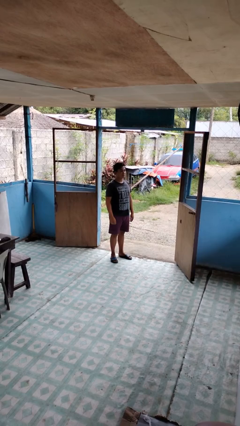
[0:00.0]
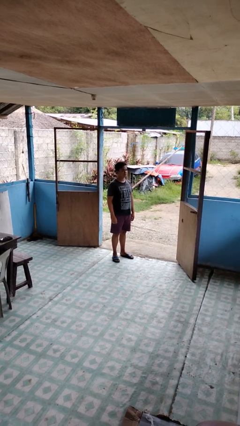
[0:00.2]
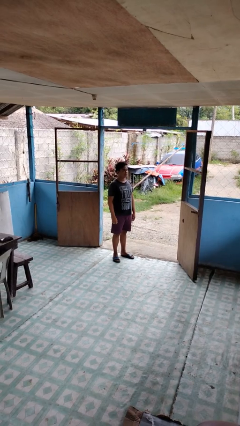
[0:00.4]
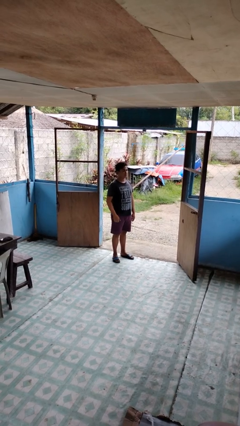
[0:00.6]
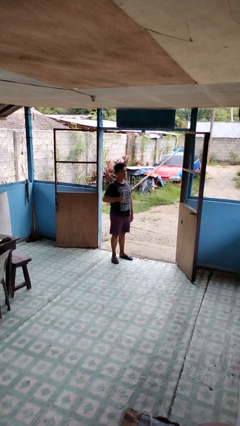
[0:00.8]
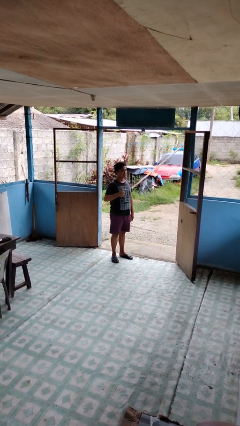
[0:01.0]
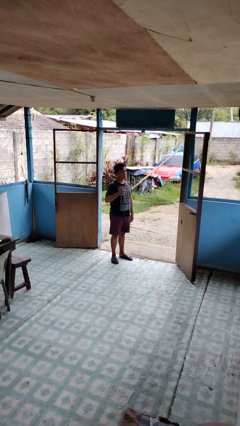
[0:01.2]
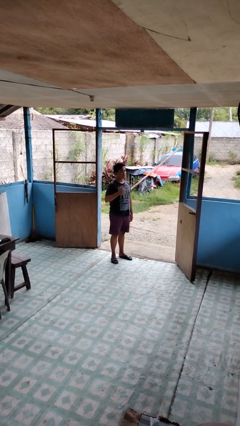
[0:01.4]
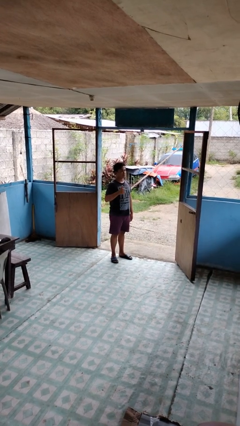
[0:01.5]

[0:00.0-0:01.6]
person gestures thumbs up

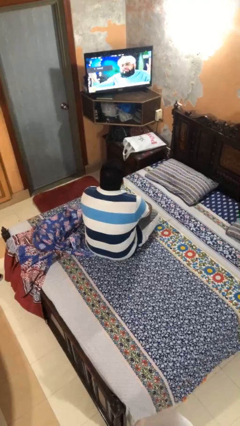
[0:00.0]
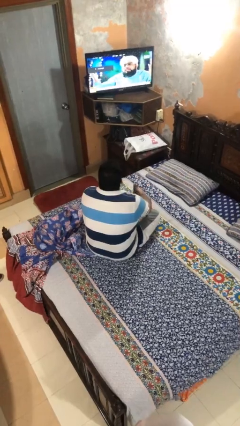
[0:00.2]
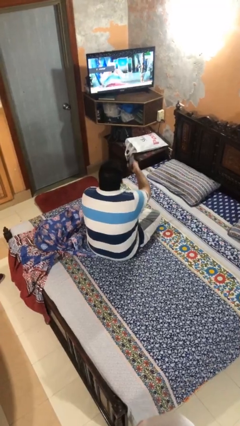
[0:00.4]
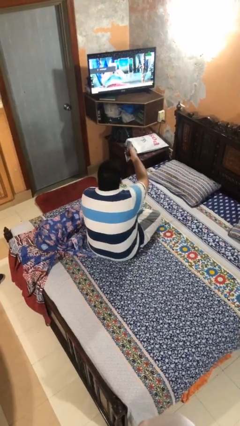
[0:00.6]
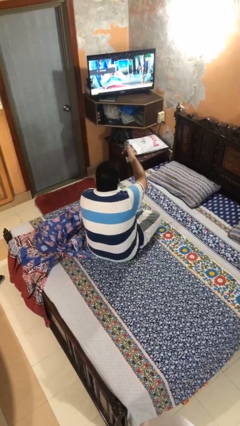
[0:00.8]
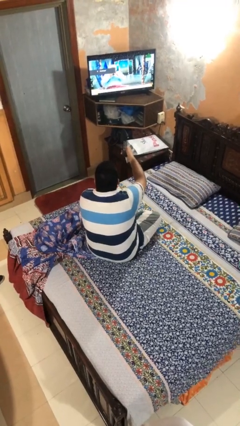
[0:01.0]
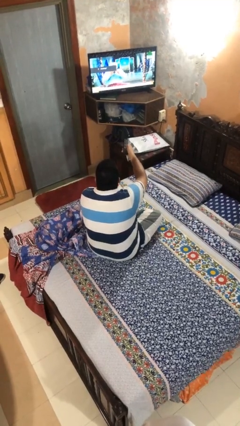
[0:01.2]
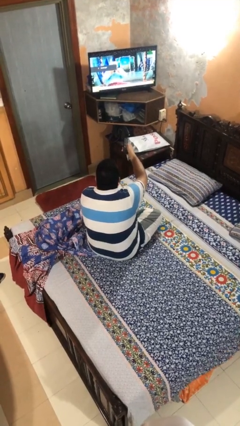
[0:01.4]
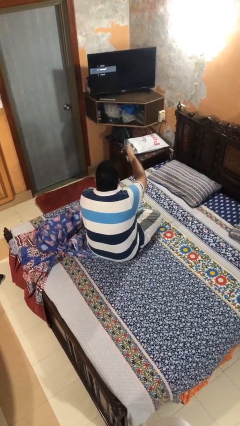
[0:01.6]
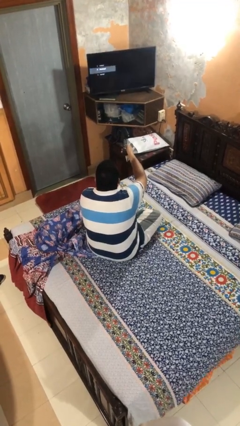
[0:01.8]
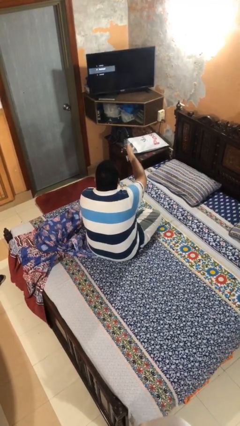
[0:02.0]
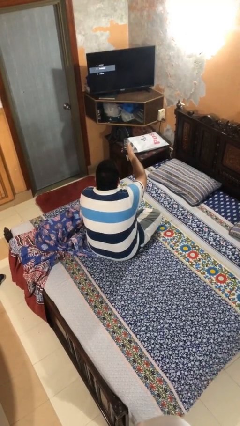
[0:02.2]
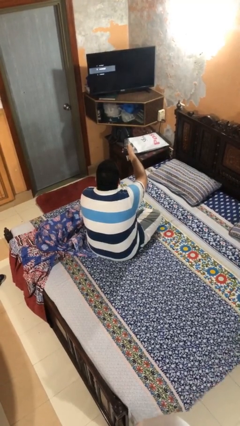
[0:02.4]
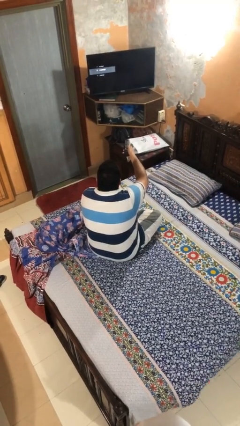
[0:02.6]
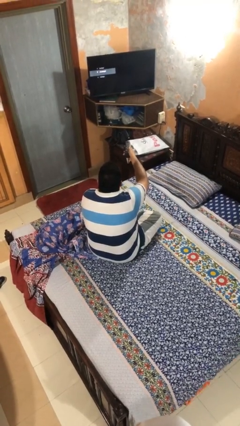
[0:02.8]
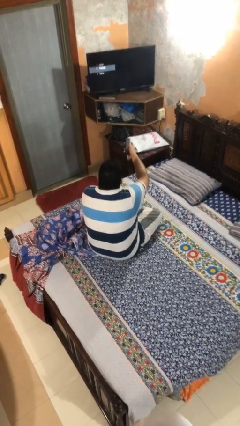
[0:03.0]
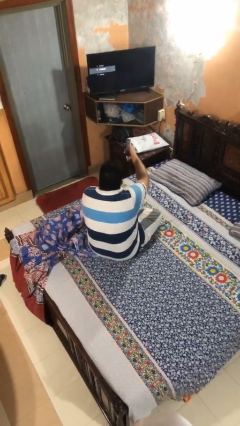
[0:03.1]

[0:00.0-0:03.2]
person uses television remote

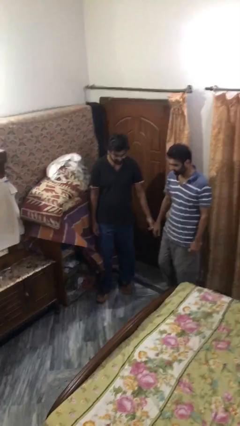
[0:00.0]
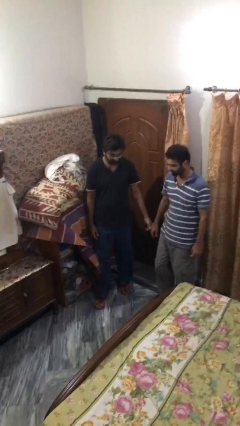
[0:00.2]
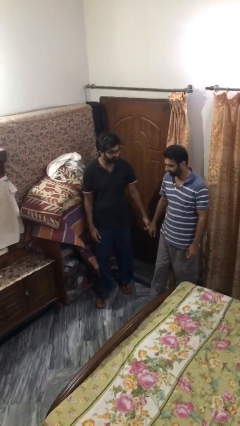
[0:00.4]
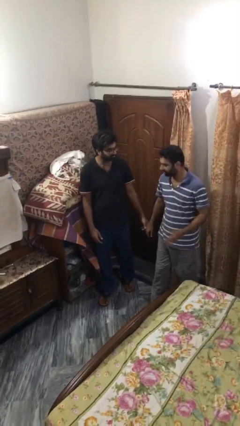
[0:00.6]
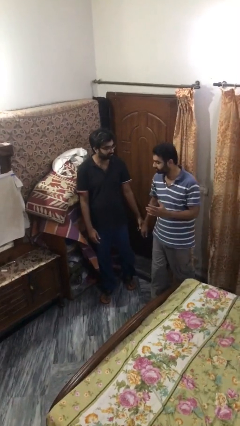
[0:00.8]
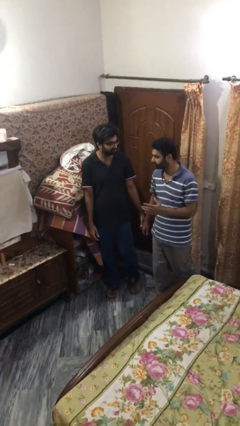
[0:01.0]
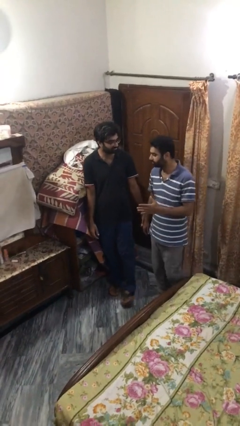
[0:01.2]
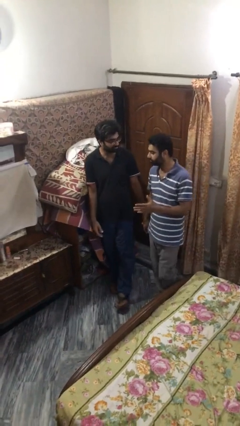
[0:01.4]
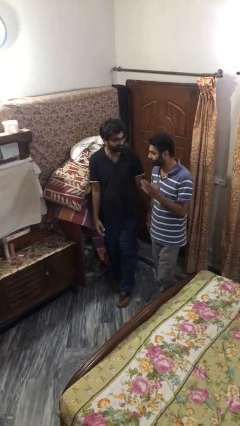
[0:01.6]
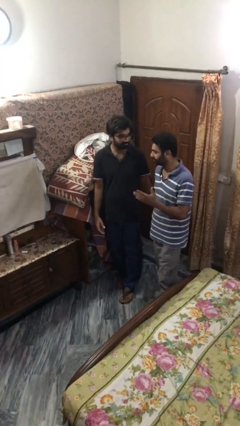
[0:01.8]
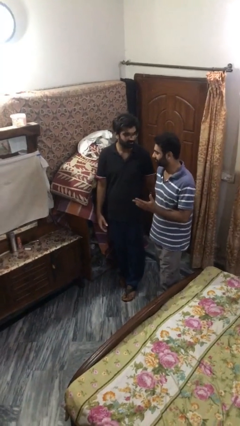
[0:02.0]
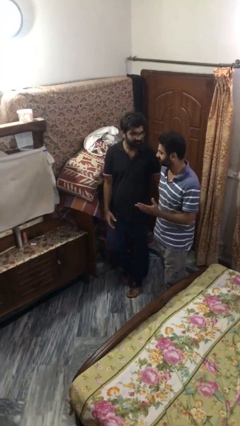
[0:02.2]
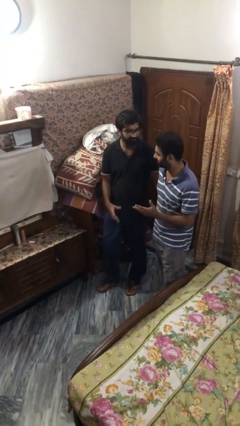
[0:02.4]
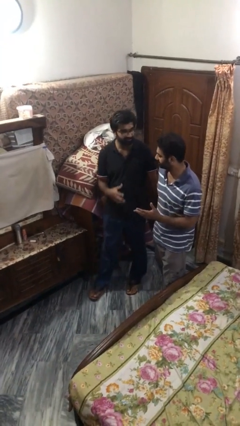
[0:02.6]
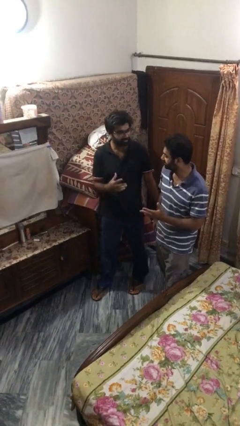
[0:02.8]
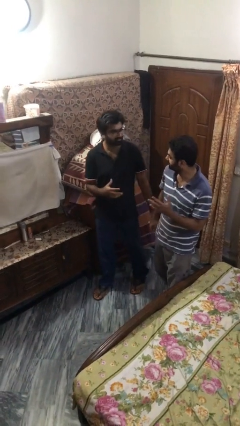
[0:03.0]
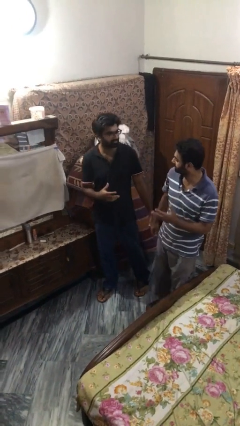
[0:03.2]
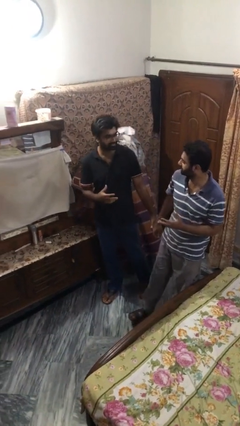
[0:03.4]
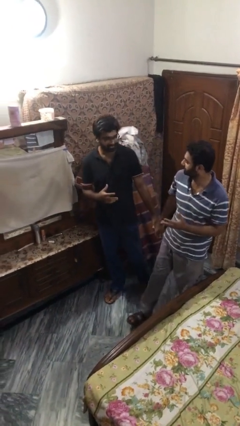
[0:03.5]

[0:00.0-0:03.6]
person holds hand

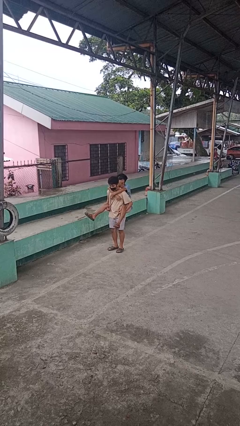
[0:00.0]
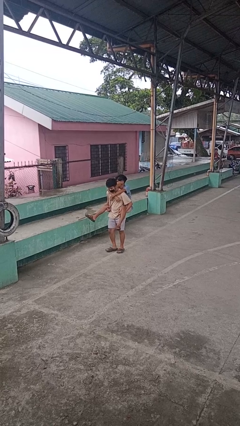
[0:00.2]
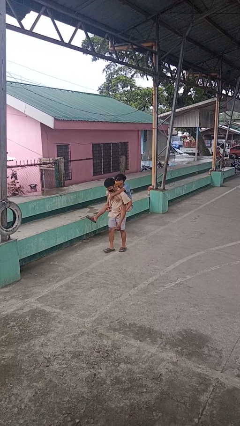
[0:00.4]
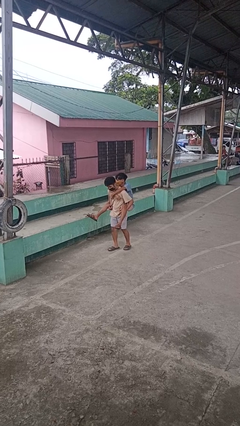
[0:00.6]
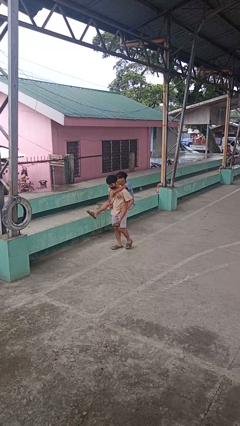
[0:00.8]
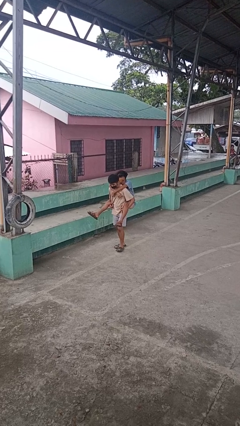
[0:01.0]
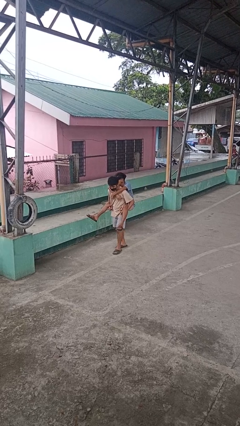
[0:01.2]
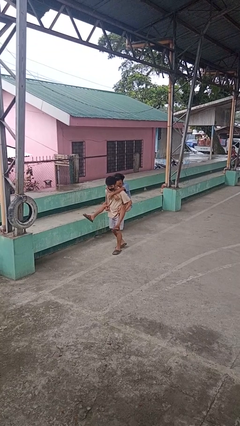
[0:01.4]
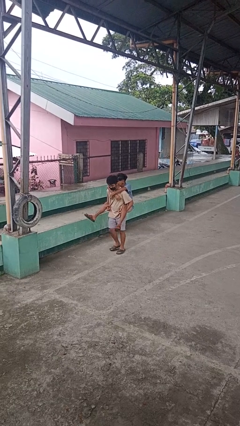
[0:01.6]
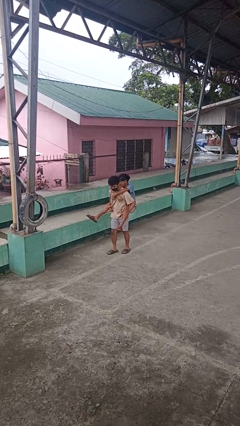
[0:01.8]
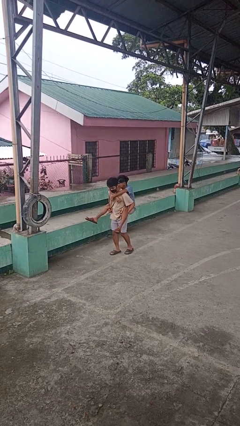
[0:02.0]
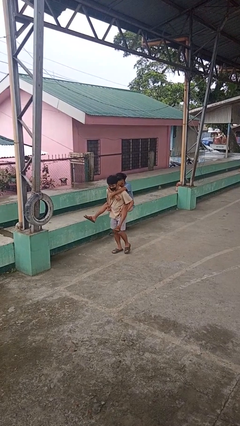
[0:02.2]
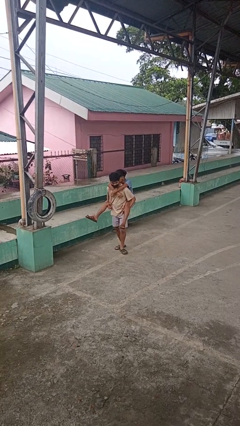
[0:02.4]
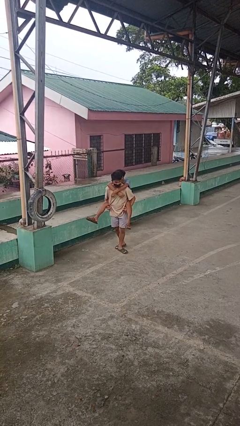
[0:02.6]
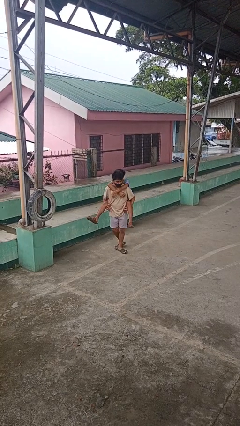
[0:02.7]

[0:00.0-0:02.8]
person carries person on back

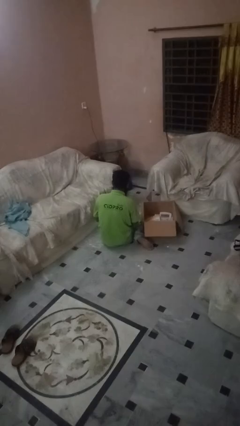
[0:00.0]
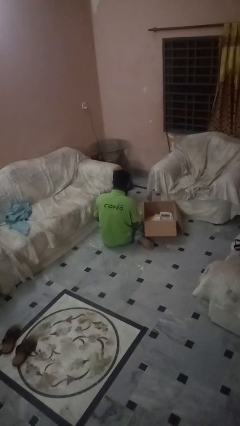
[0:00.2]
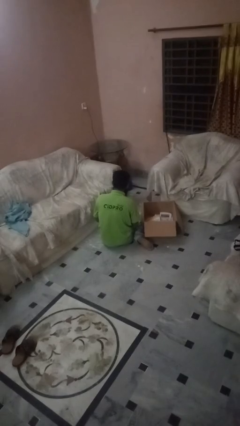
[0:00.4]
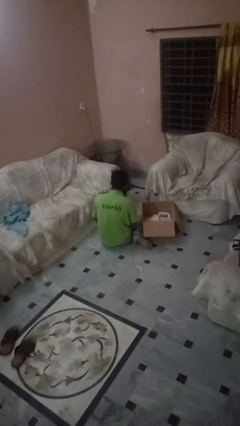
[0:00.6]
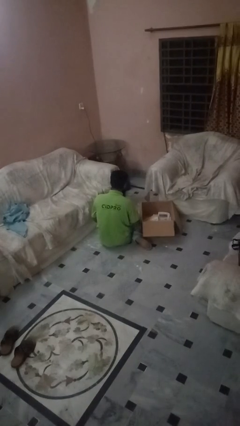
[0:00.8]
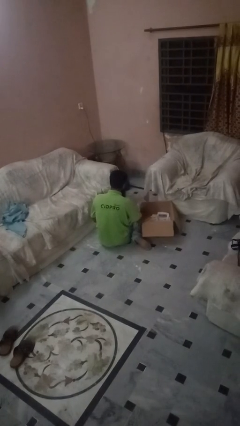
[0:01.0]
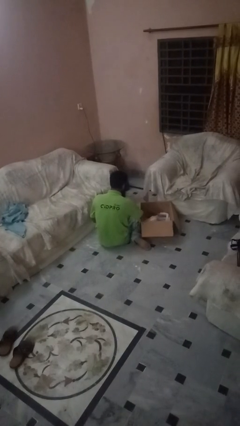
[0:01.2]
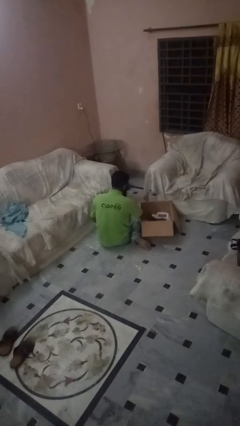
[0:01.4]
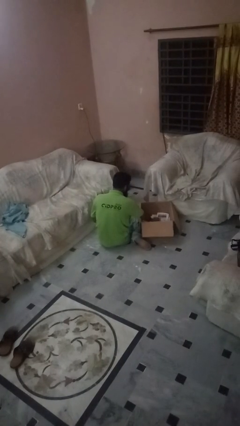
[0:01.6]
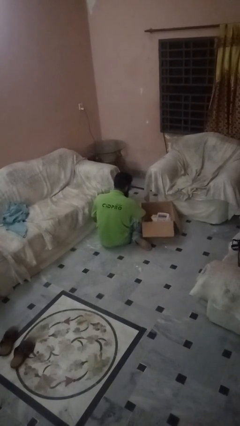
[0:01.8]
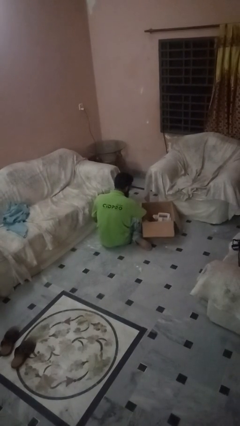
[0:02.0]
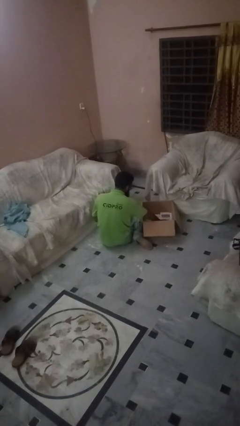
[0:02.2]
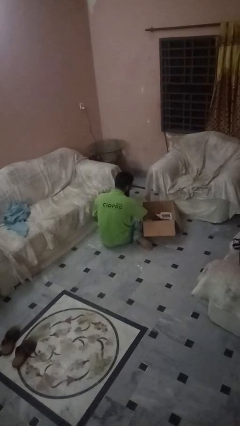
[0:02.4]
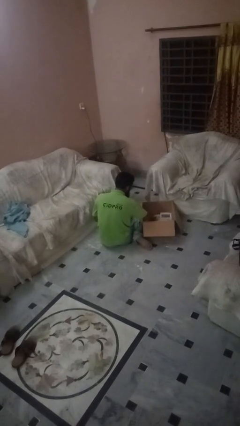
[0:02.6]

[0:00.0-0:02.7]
person searches in box

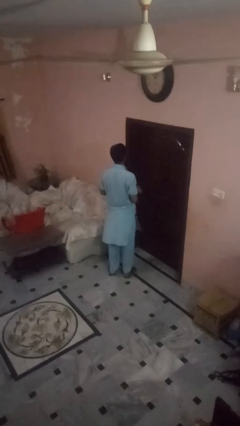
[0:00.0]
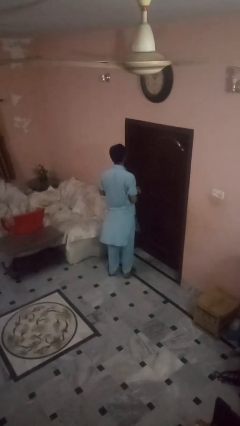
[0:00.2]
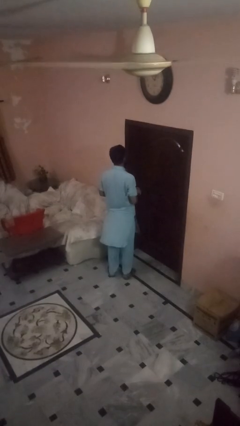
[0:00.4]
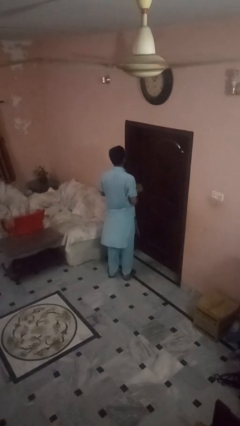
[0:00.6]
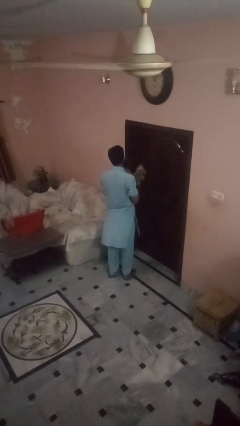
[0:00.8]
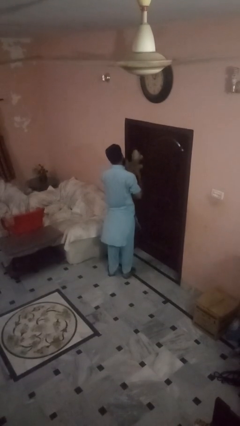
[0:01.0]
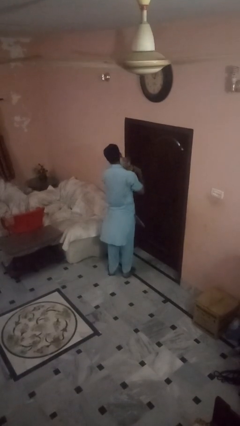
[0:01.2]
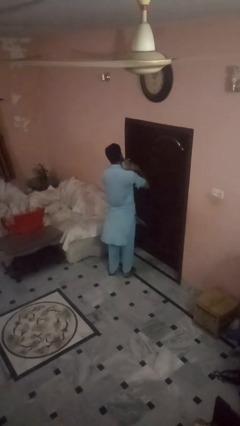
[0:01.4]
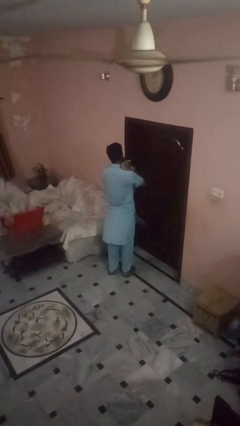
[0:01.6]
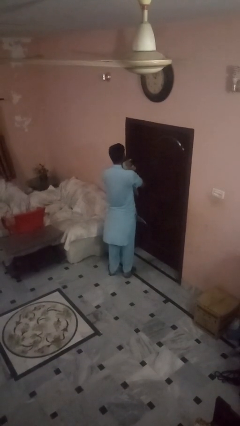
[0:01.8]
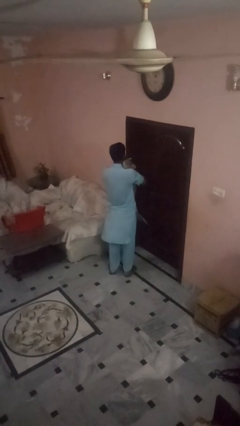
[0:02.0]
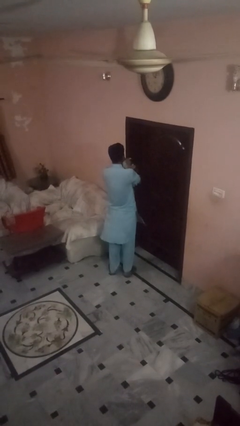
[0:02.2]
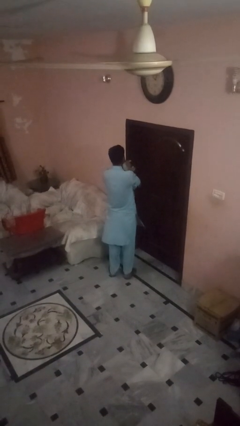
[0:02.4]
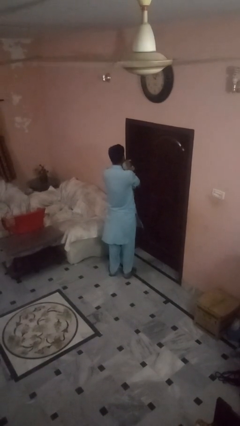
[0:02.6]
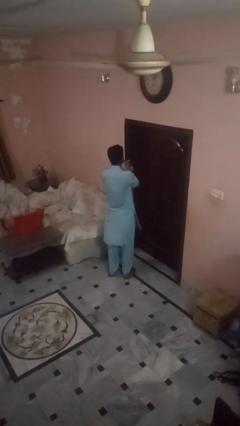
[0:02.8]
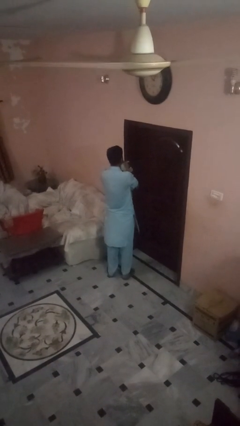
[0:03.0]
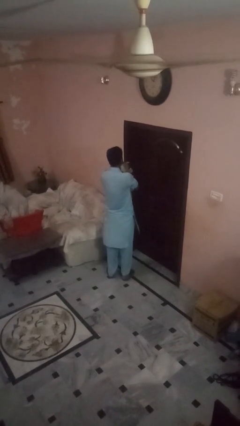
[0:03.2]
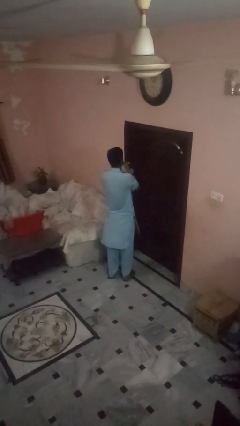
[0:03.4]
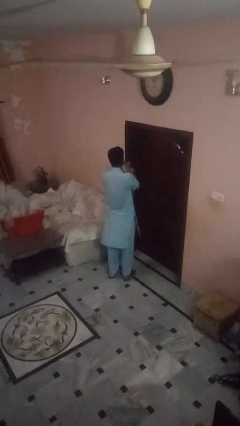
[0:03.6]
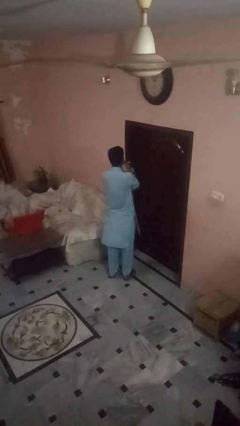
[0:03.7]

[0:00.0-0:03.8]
person hugs stuffed animal
